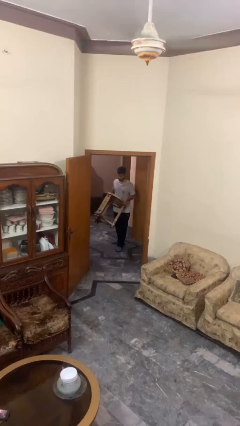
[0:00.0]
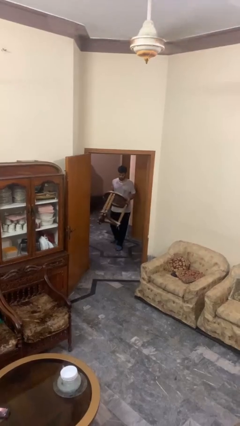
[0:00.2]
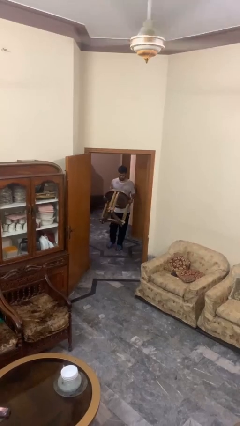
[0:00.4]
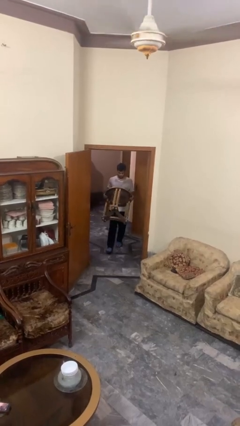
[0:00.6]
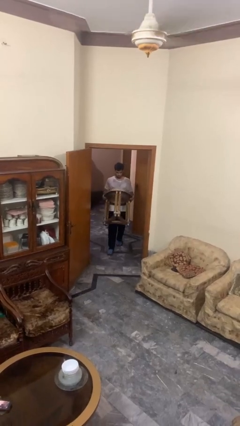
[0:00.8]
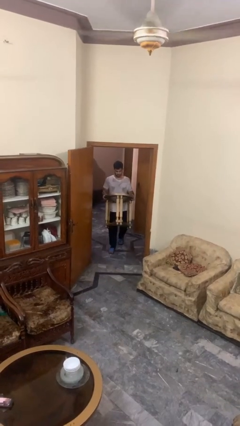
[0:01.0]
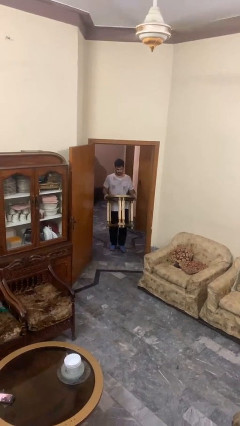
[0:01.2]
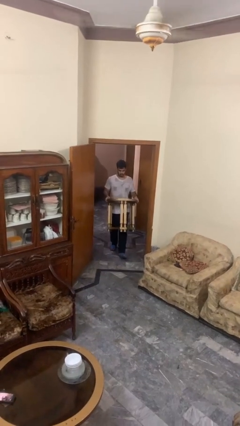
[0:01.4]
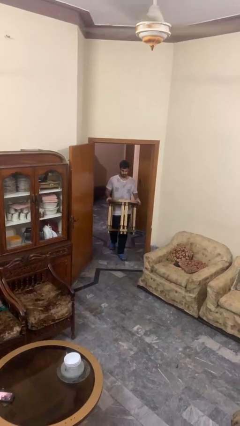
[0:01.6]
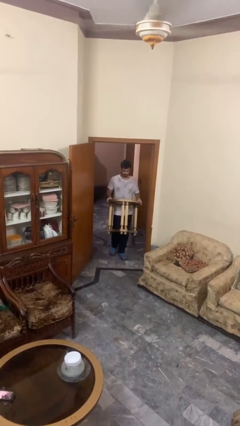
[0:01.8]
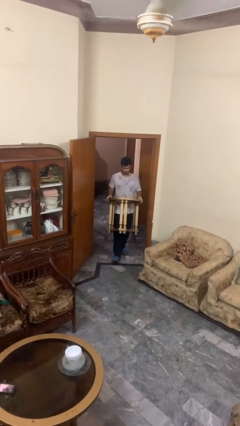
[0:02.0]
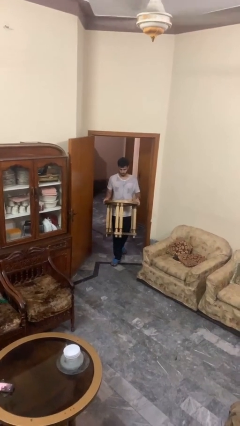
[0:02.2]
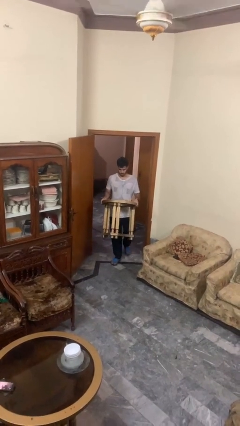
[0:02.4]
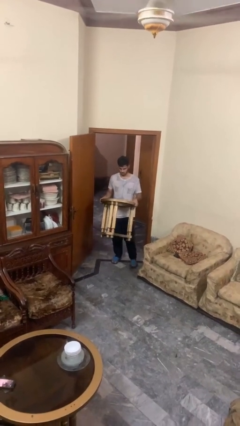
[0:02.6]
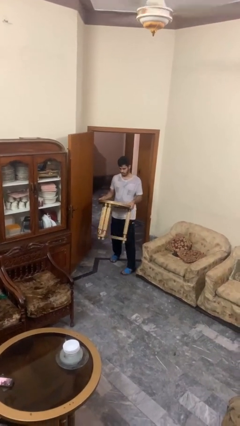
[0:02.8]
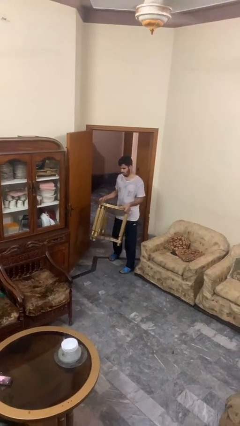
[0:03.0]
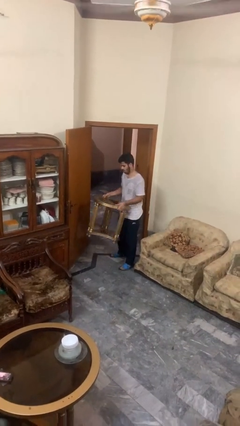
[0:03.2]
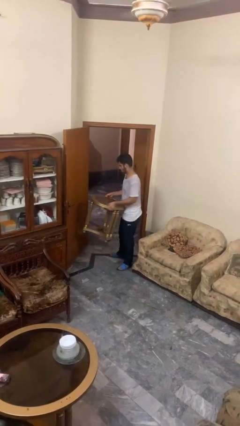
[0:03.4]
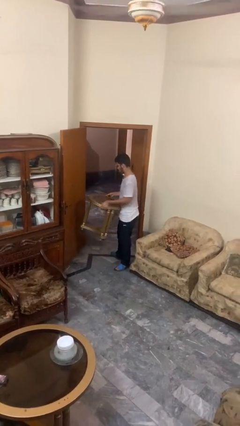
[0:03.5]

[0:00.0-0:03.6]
person carries furniture

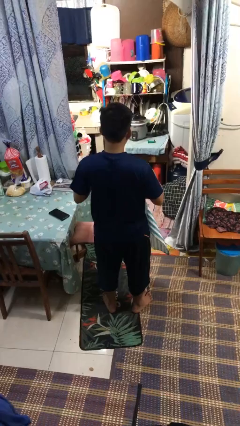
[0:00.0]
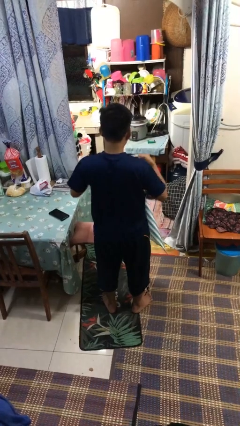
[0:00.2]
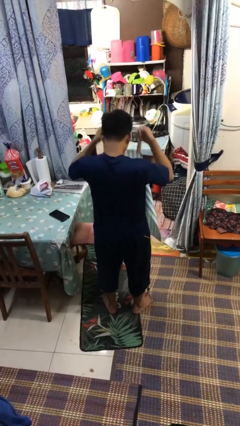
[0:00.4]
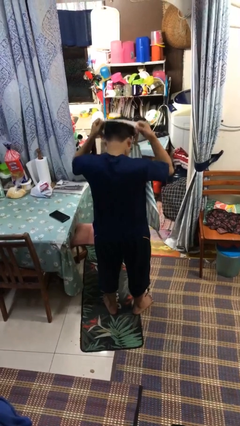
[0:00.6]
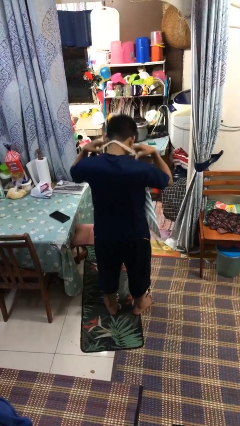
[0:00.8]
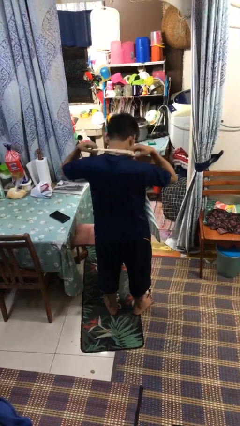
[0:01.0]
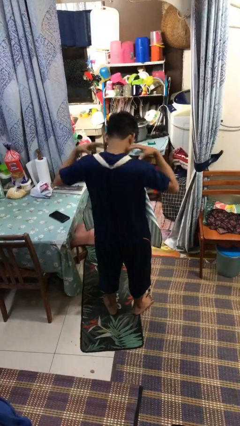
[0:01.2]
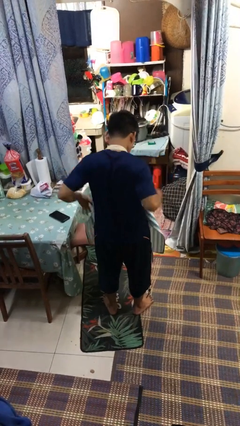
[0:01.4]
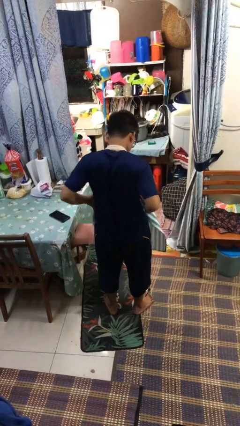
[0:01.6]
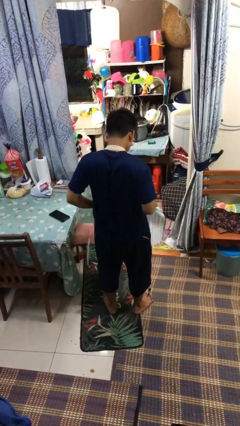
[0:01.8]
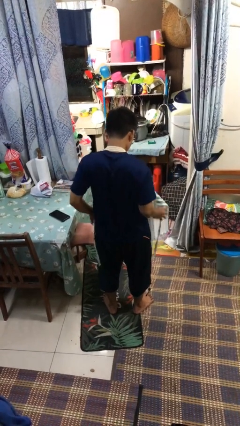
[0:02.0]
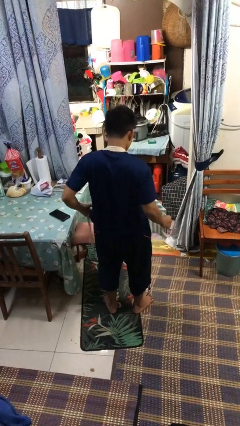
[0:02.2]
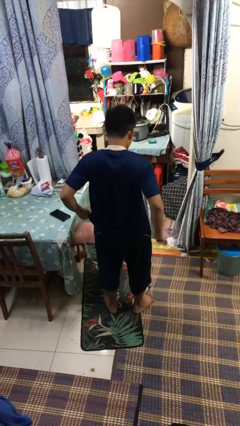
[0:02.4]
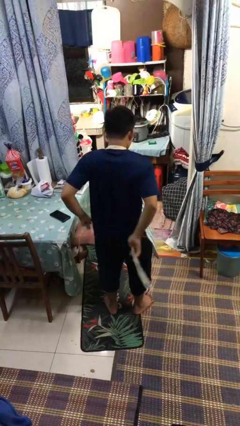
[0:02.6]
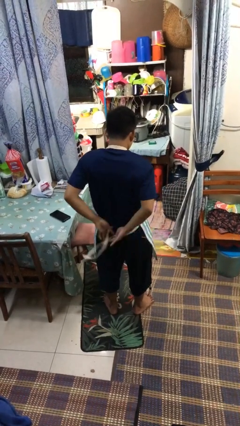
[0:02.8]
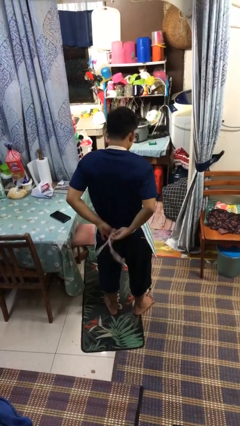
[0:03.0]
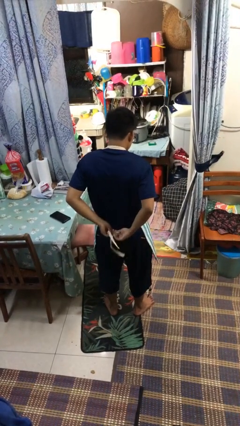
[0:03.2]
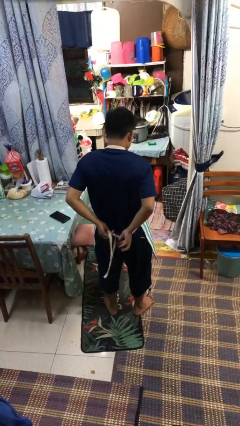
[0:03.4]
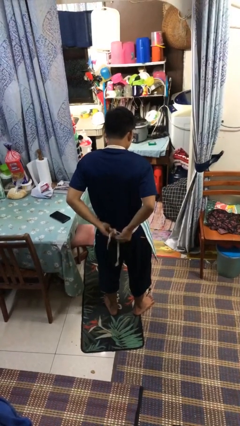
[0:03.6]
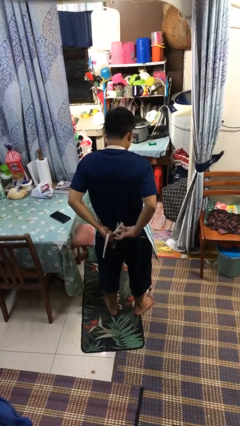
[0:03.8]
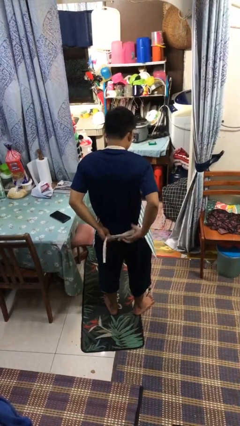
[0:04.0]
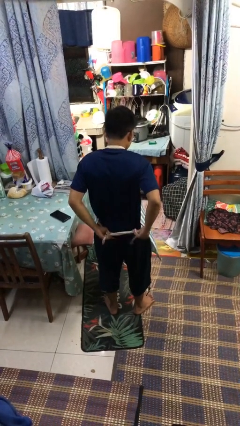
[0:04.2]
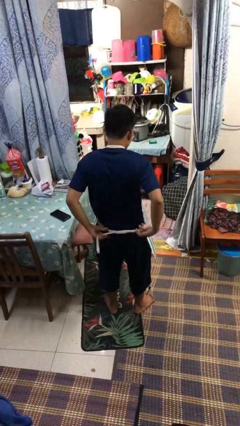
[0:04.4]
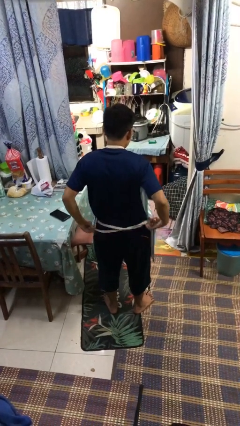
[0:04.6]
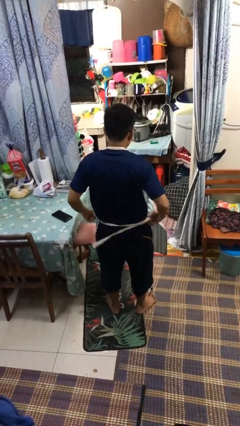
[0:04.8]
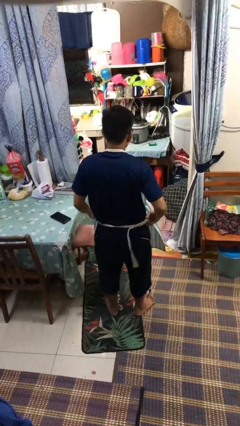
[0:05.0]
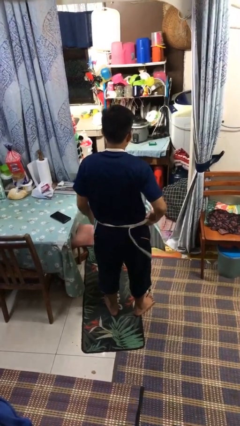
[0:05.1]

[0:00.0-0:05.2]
person puts on apron

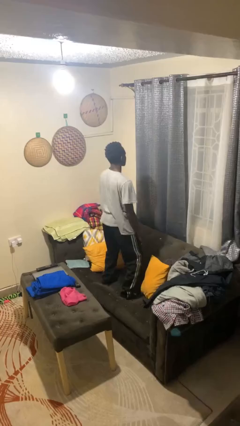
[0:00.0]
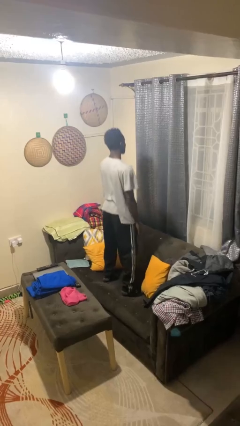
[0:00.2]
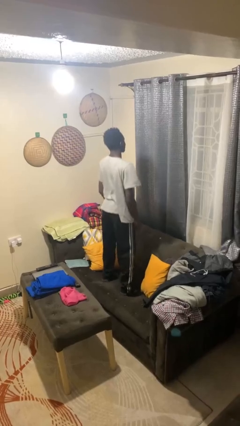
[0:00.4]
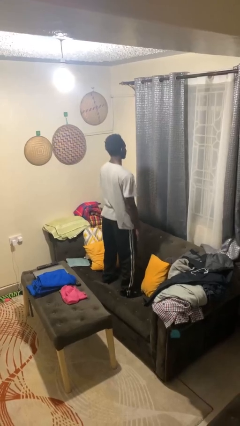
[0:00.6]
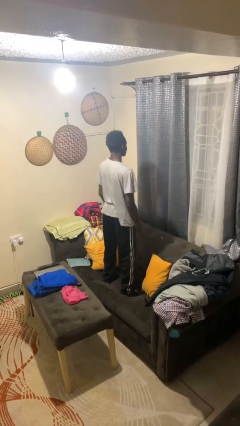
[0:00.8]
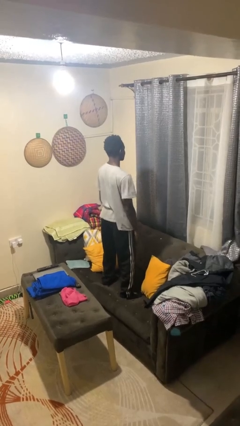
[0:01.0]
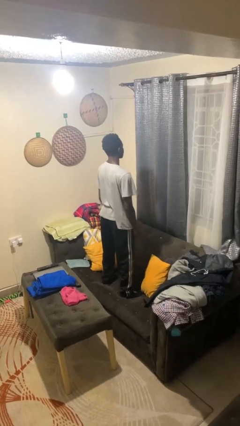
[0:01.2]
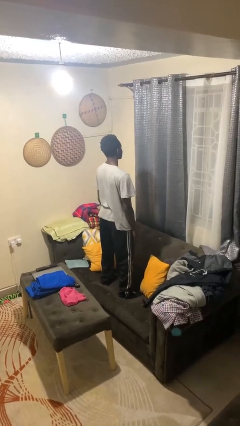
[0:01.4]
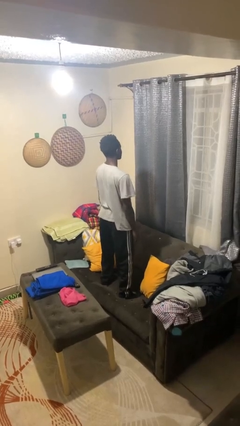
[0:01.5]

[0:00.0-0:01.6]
person jumps on couch

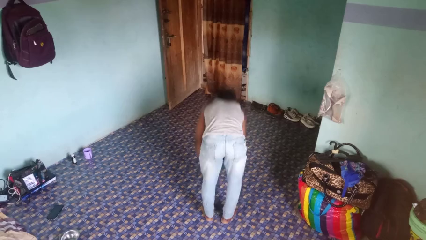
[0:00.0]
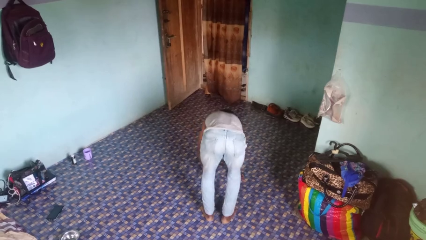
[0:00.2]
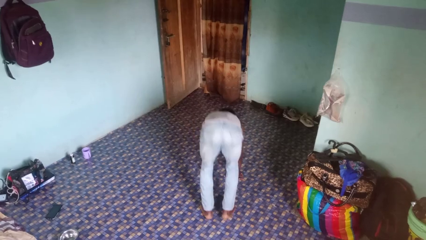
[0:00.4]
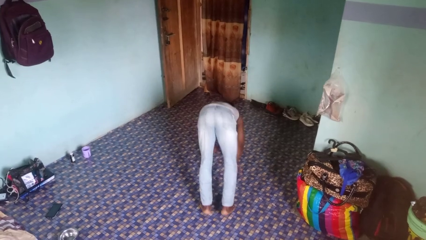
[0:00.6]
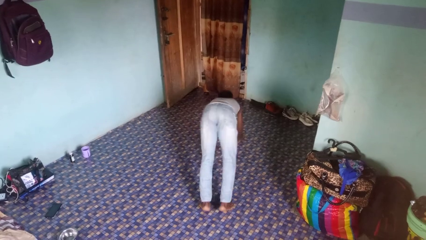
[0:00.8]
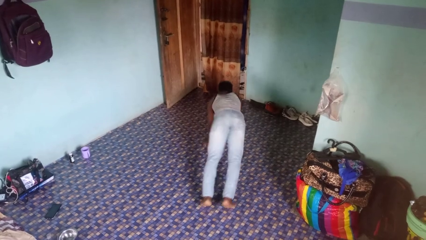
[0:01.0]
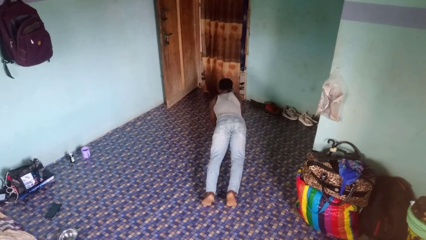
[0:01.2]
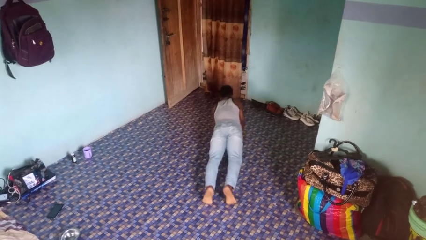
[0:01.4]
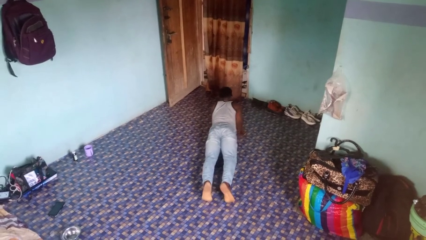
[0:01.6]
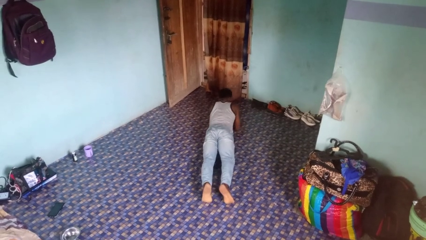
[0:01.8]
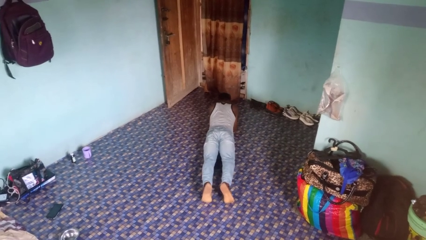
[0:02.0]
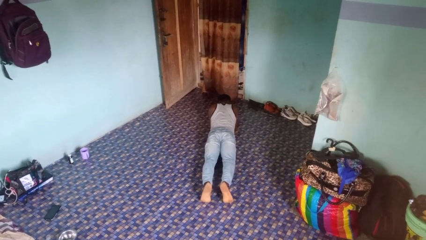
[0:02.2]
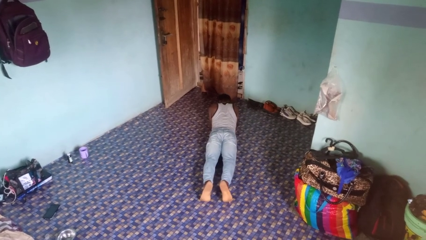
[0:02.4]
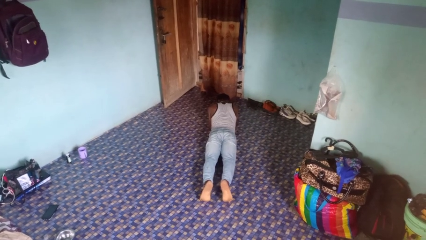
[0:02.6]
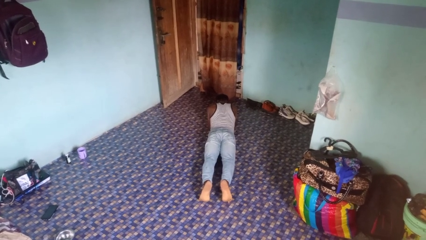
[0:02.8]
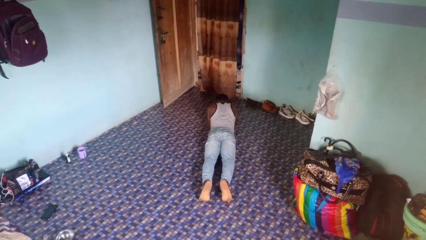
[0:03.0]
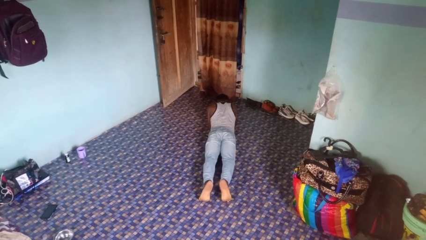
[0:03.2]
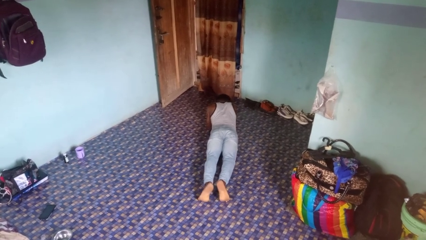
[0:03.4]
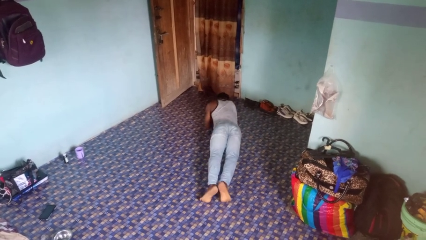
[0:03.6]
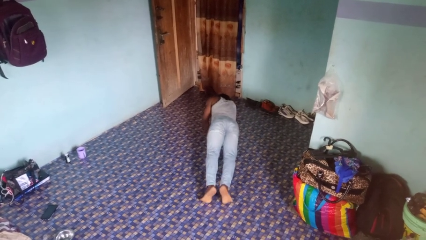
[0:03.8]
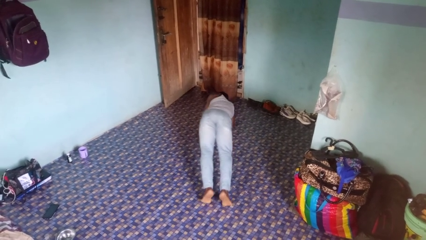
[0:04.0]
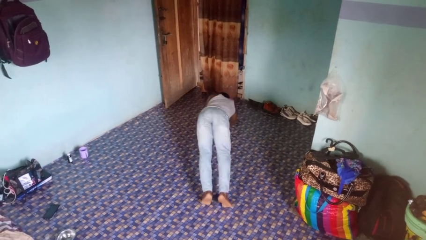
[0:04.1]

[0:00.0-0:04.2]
person exercises with plank

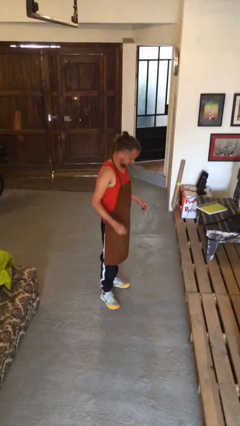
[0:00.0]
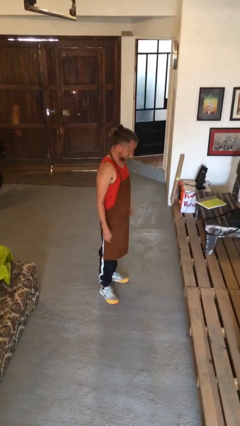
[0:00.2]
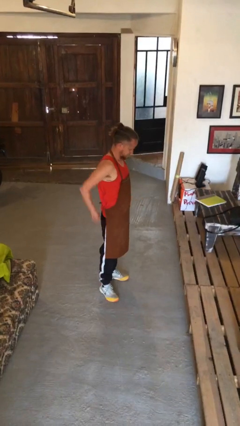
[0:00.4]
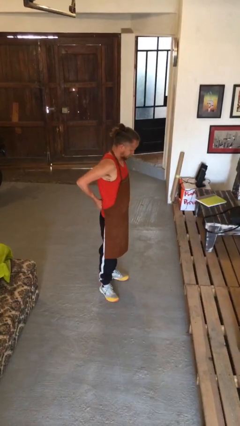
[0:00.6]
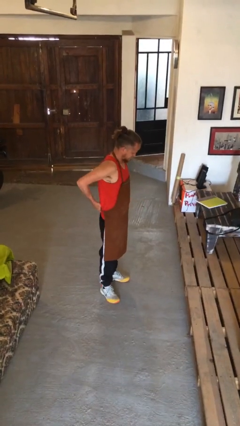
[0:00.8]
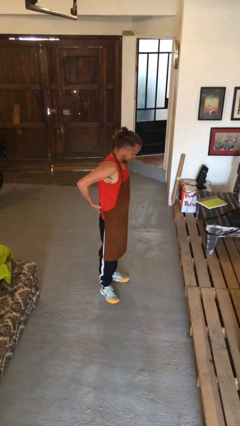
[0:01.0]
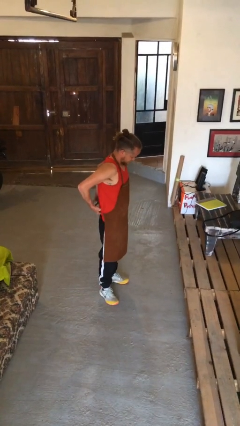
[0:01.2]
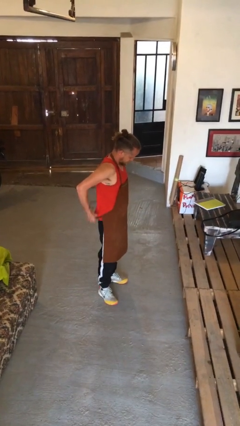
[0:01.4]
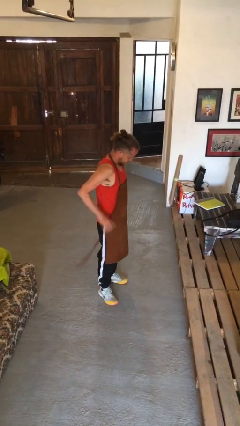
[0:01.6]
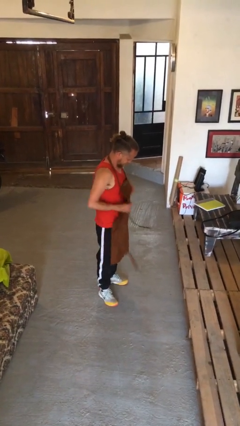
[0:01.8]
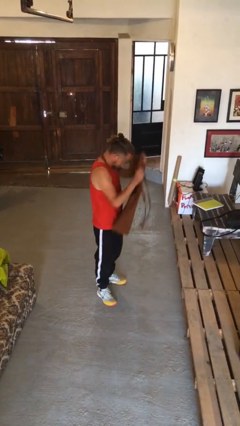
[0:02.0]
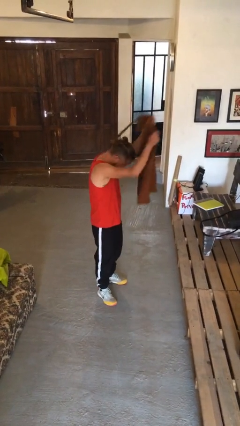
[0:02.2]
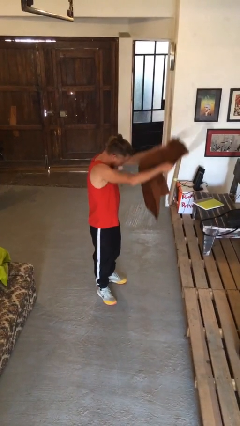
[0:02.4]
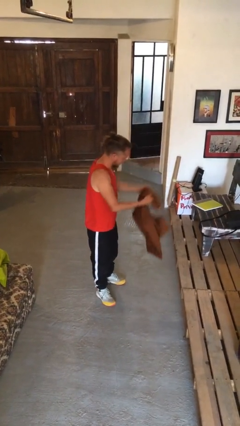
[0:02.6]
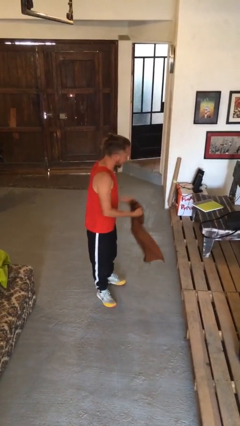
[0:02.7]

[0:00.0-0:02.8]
person takes off apron

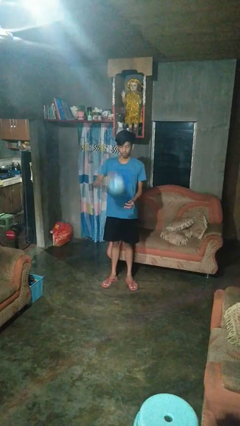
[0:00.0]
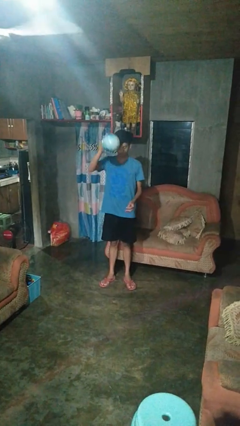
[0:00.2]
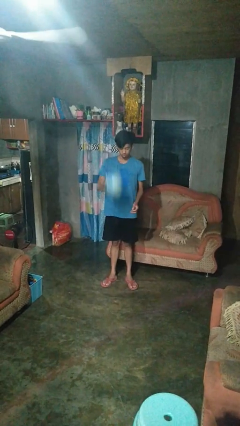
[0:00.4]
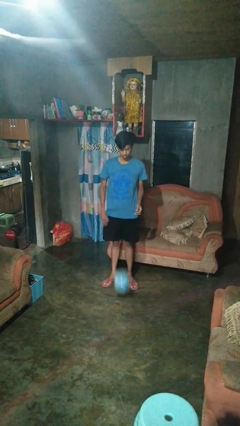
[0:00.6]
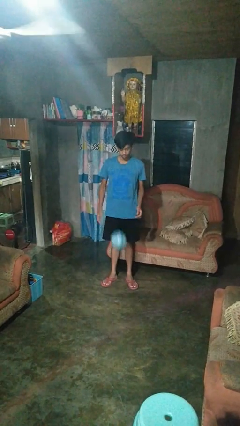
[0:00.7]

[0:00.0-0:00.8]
person bounces ball on floor
